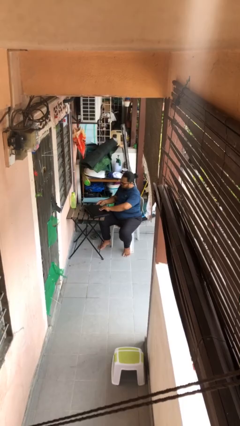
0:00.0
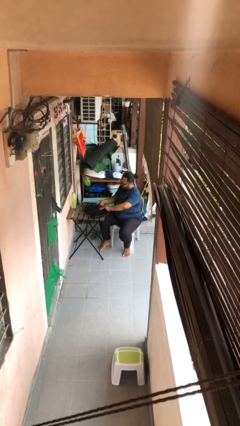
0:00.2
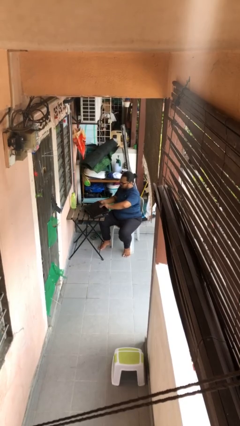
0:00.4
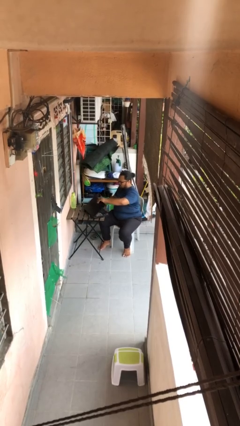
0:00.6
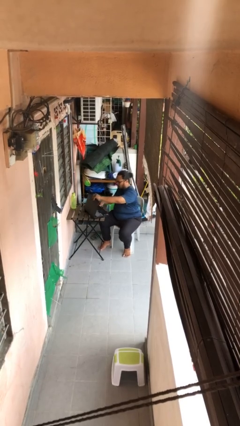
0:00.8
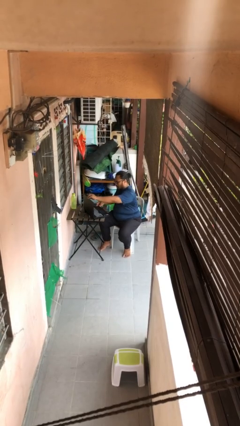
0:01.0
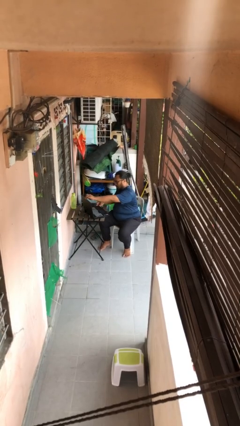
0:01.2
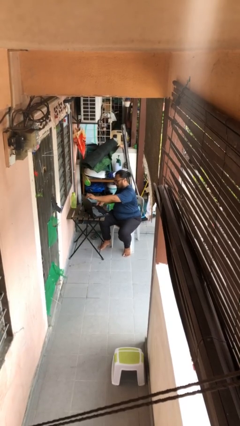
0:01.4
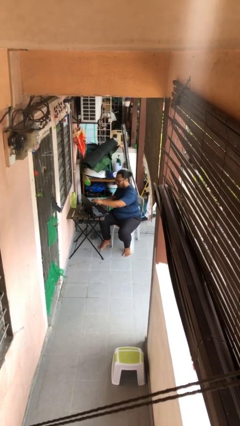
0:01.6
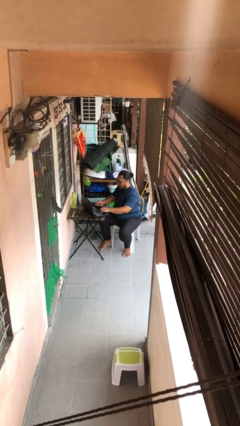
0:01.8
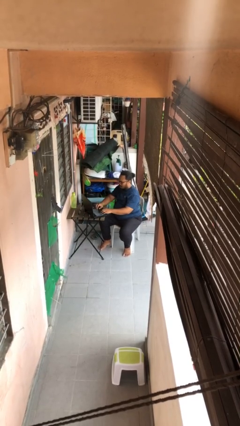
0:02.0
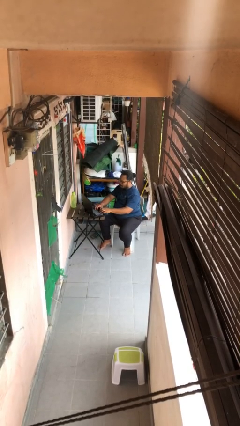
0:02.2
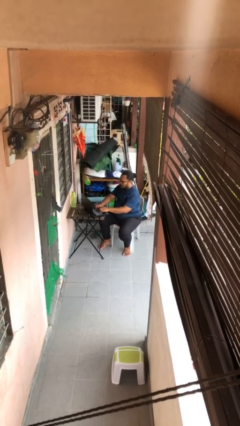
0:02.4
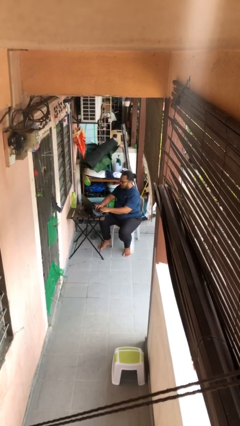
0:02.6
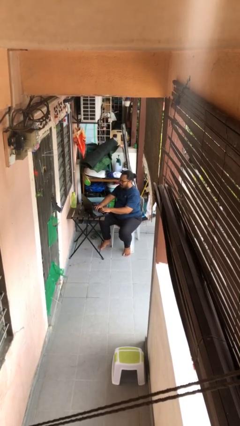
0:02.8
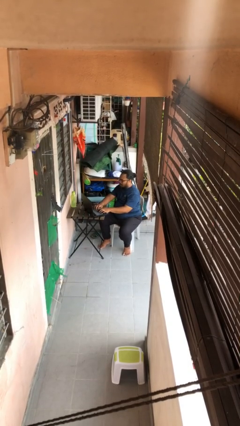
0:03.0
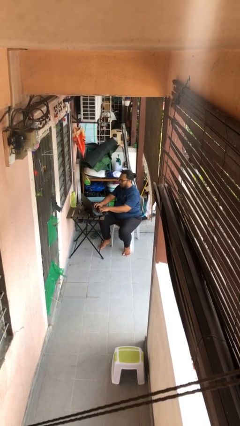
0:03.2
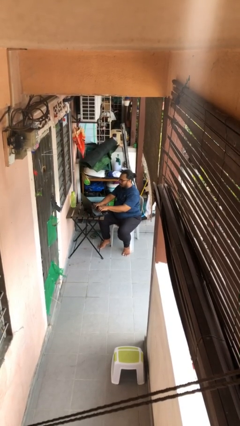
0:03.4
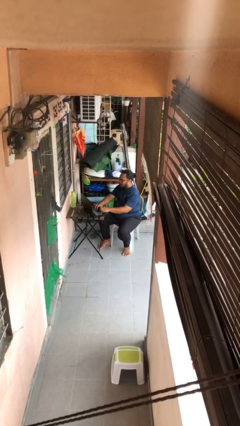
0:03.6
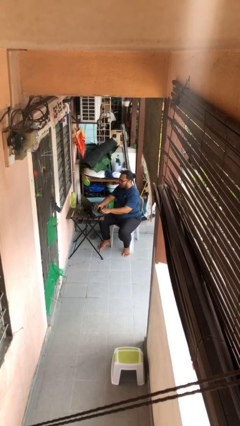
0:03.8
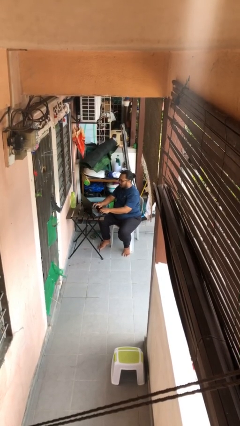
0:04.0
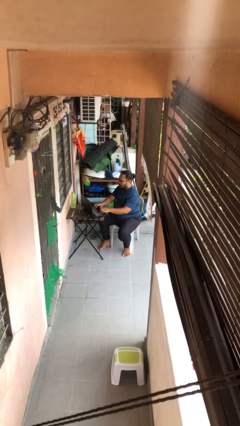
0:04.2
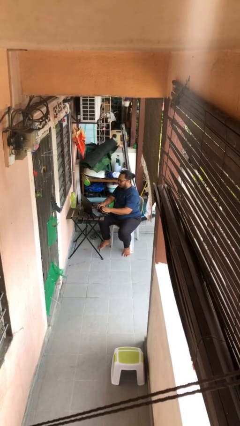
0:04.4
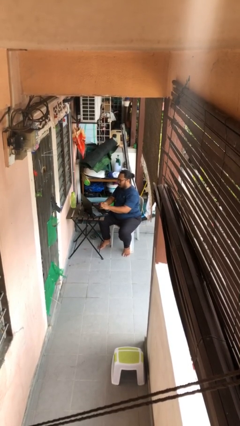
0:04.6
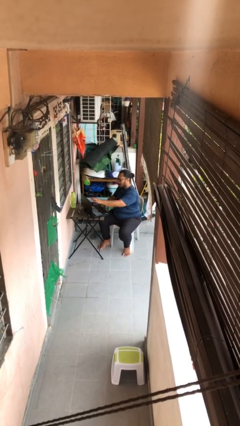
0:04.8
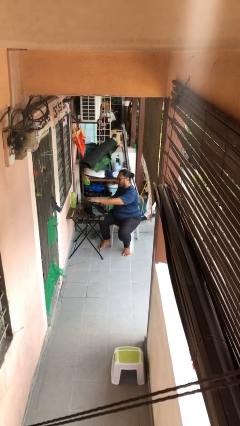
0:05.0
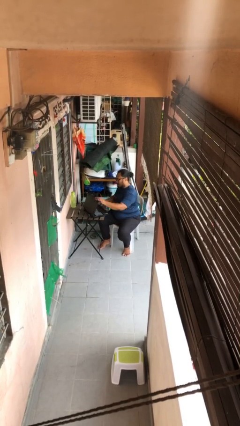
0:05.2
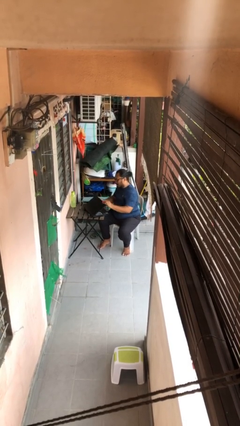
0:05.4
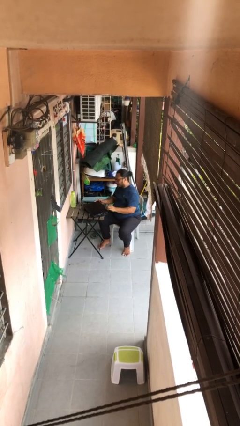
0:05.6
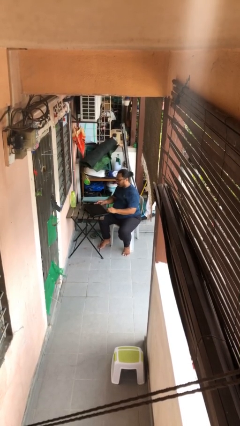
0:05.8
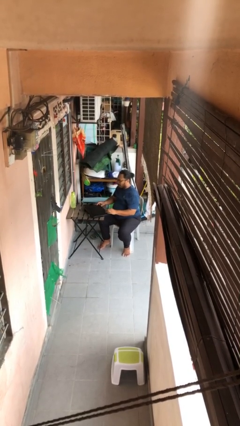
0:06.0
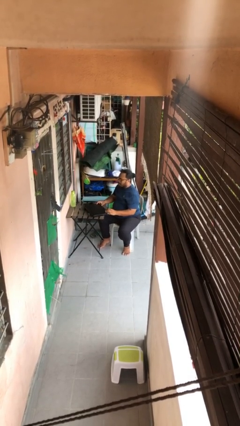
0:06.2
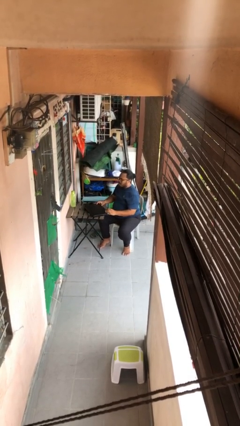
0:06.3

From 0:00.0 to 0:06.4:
person interacts with laptop

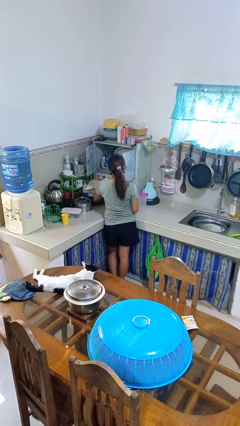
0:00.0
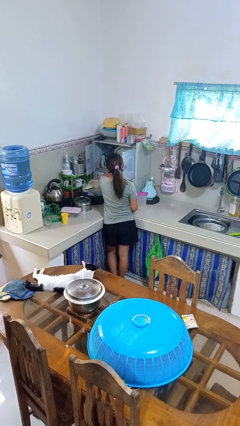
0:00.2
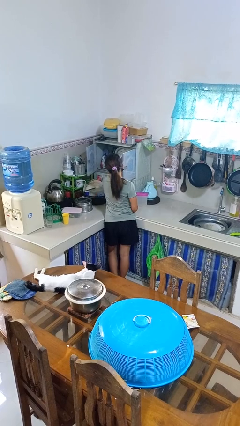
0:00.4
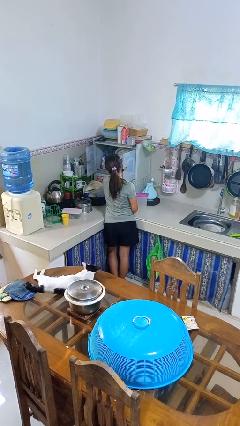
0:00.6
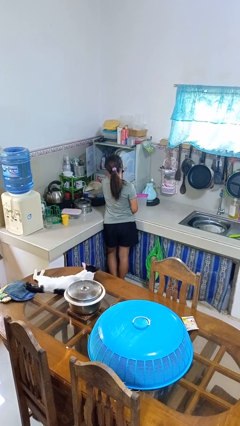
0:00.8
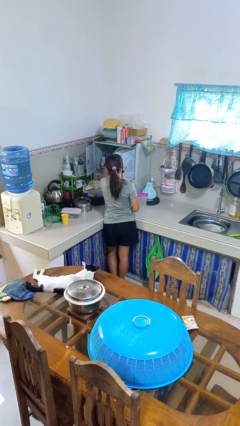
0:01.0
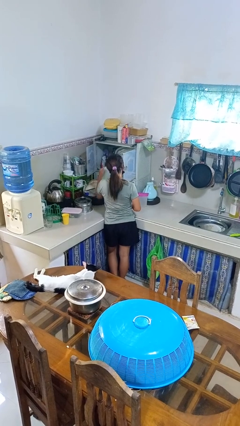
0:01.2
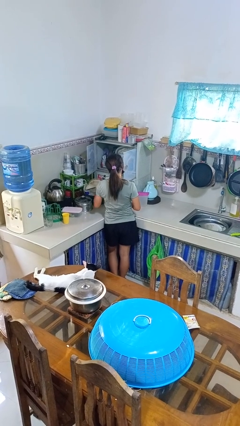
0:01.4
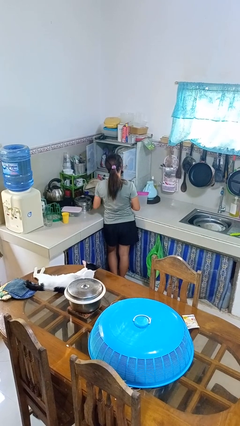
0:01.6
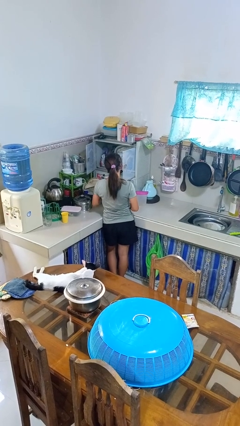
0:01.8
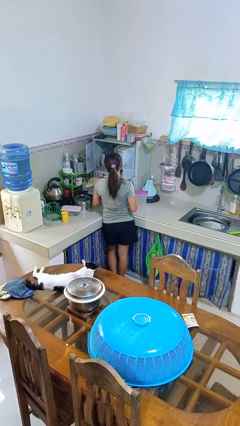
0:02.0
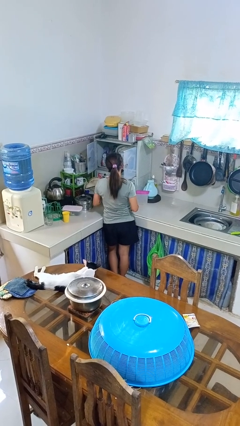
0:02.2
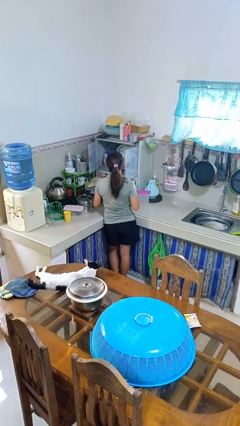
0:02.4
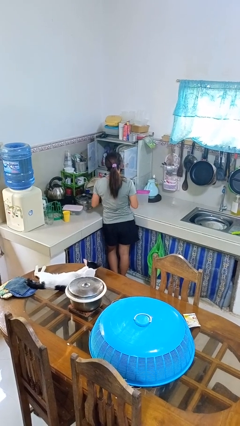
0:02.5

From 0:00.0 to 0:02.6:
person takes object from kitchen drawer

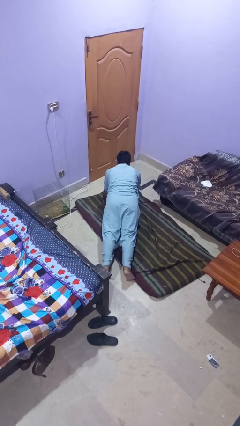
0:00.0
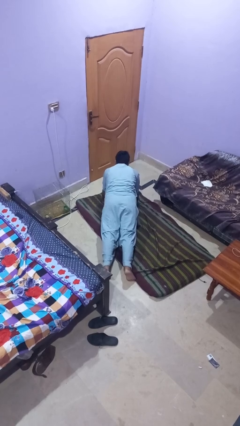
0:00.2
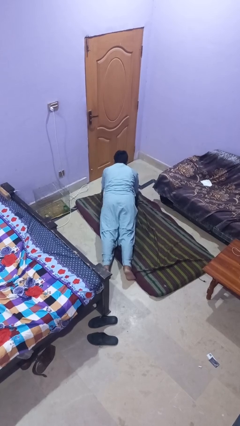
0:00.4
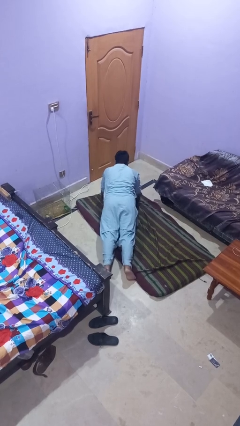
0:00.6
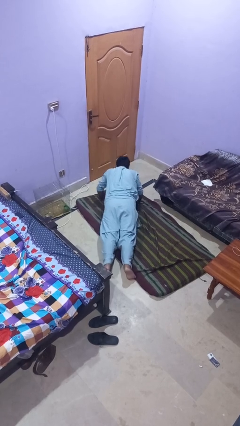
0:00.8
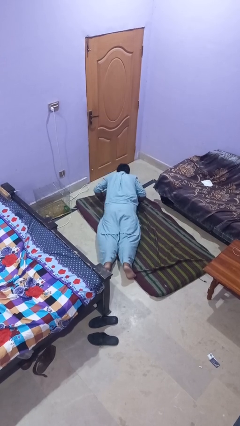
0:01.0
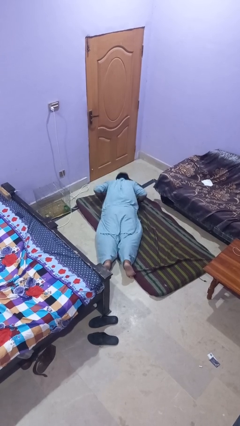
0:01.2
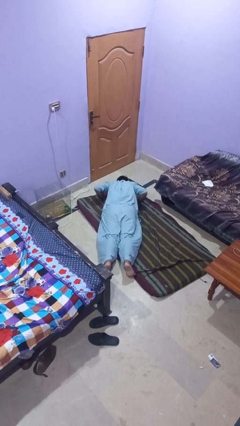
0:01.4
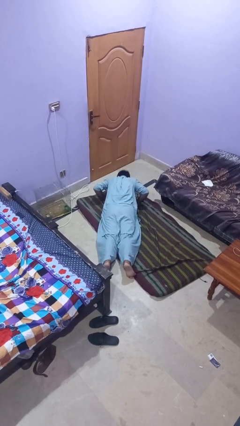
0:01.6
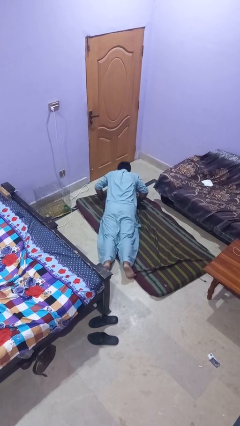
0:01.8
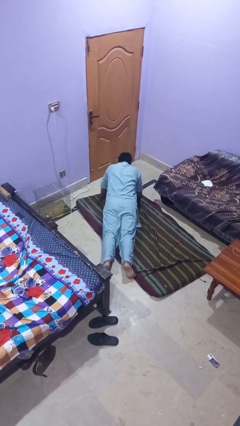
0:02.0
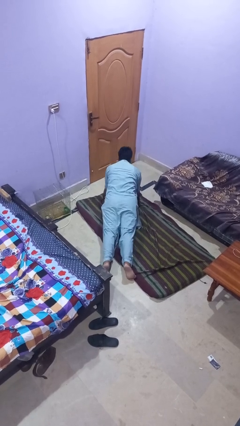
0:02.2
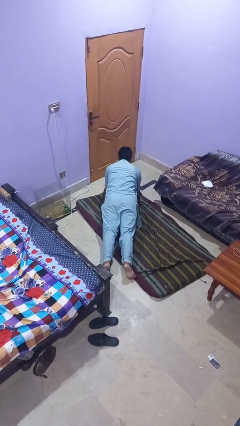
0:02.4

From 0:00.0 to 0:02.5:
person exercises with pushup

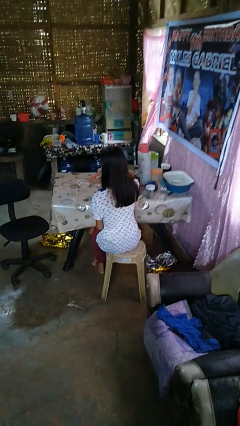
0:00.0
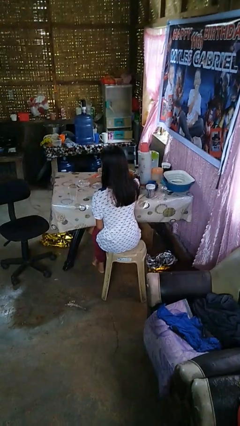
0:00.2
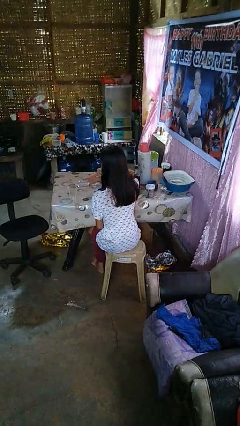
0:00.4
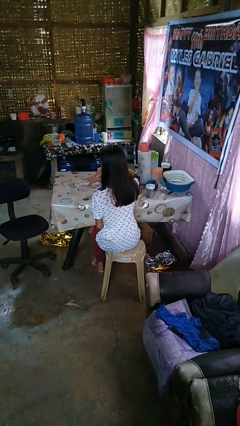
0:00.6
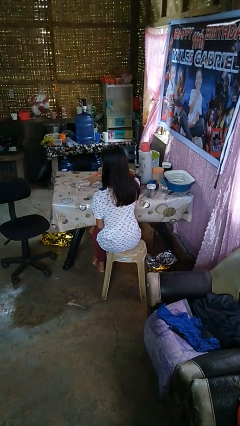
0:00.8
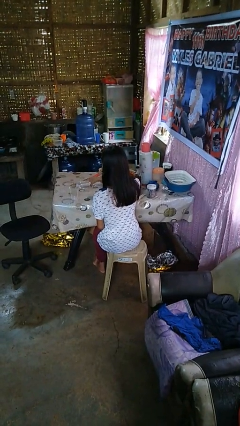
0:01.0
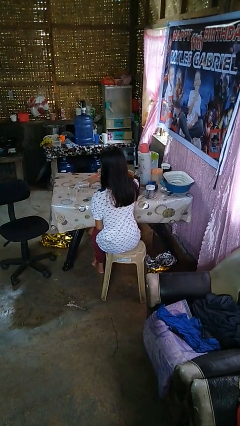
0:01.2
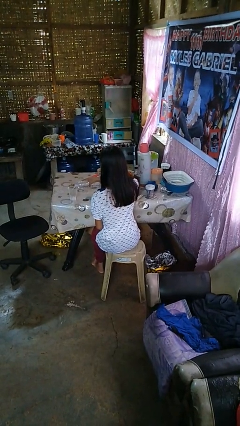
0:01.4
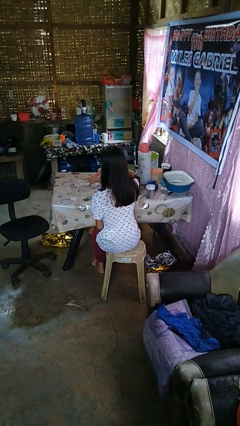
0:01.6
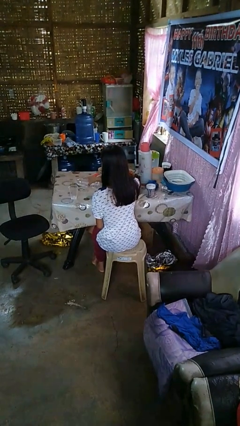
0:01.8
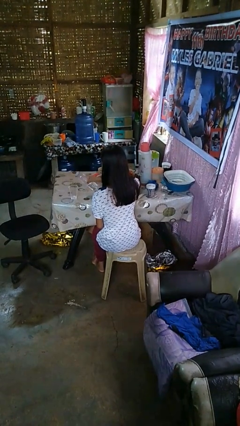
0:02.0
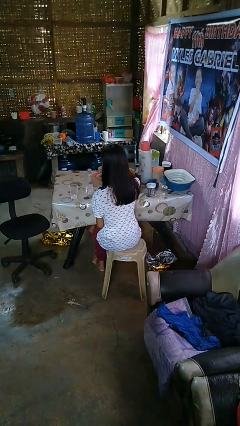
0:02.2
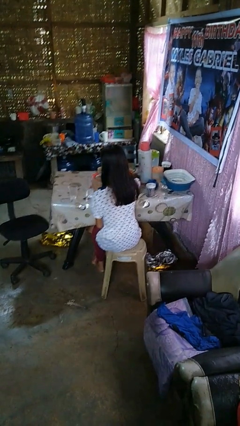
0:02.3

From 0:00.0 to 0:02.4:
person pours liquid into cup

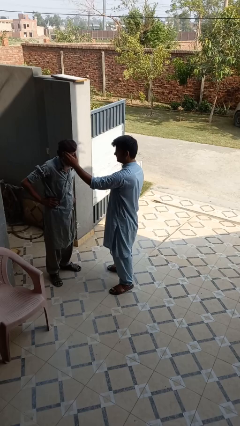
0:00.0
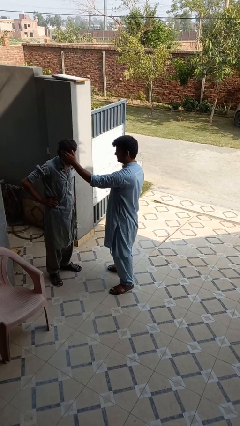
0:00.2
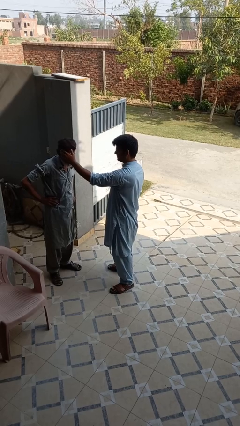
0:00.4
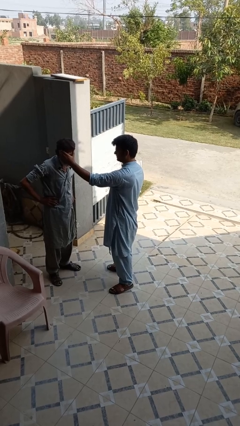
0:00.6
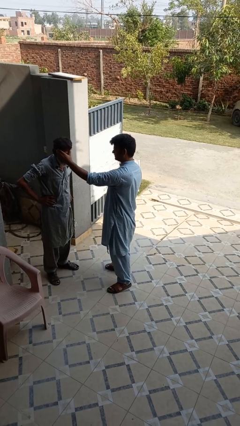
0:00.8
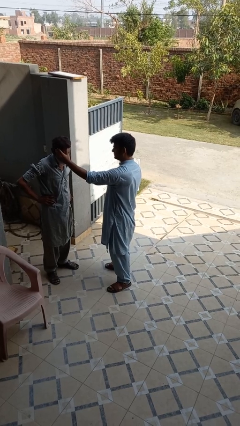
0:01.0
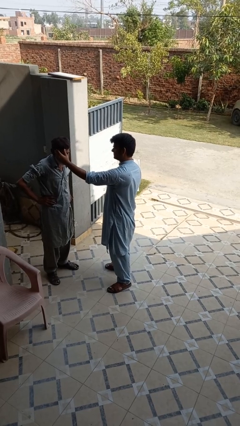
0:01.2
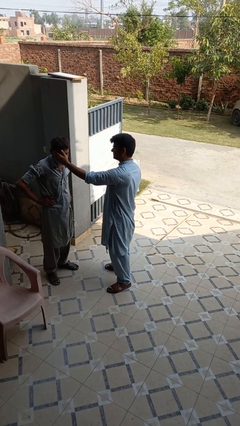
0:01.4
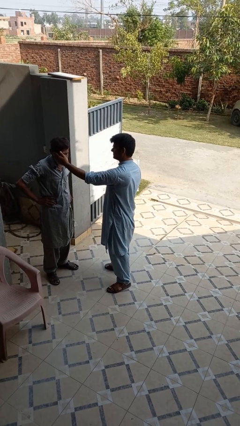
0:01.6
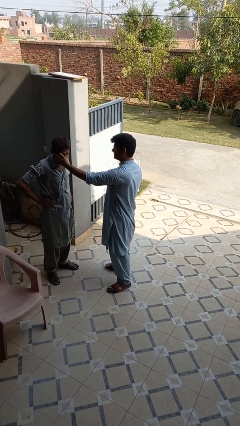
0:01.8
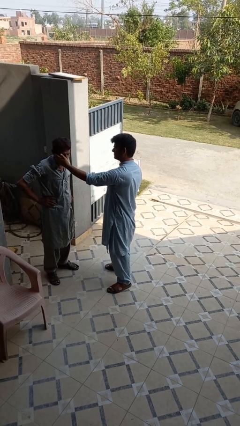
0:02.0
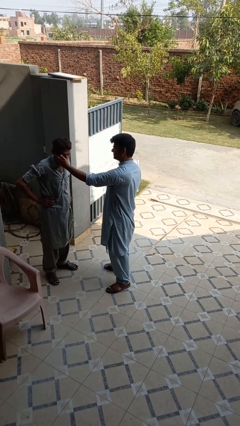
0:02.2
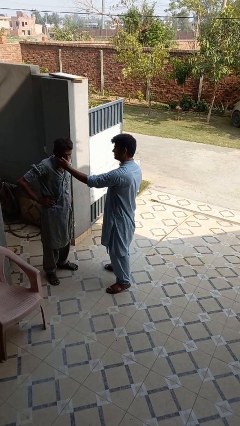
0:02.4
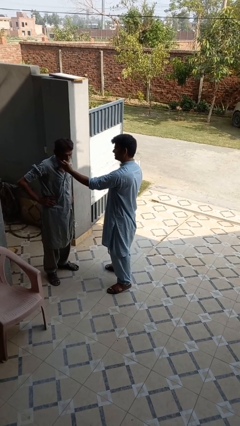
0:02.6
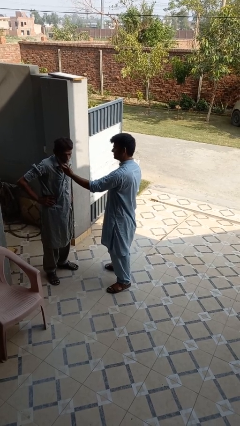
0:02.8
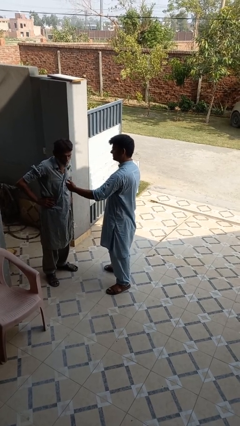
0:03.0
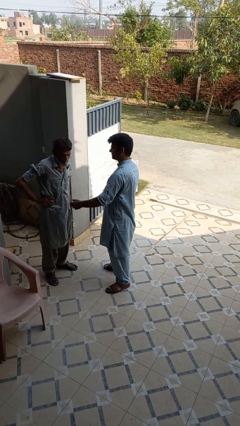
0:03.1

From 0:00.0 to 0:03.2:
person touches face of person

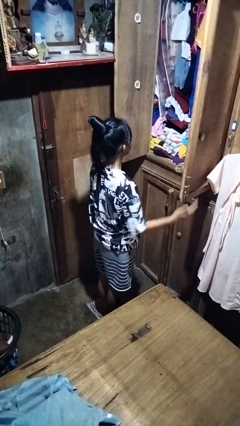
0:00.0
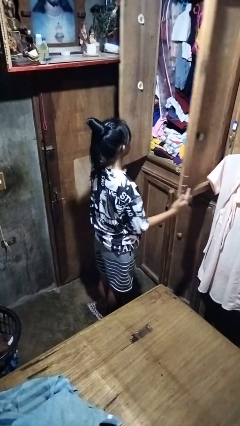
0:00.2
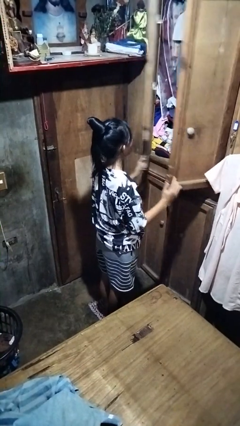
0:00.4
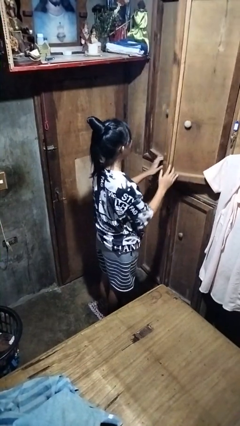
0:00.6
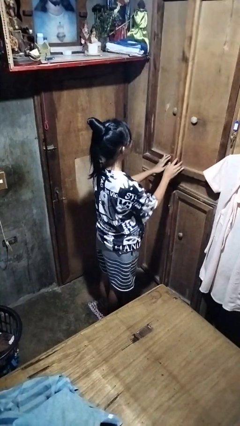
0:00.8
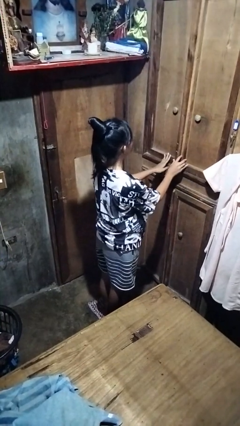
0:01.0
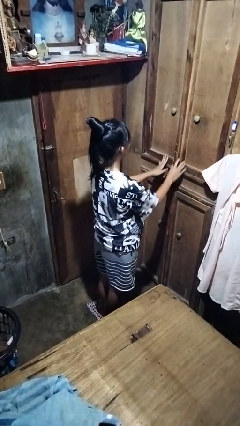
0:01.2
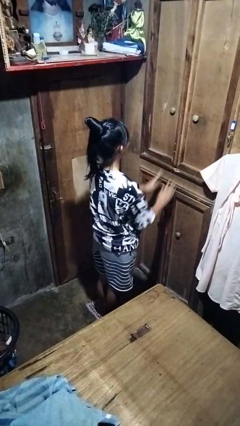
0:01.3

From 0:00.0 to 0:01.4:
person closes closet door
